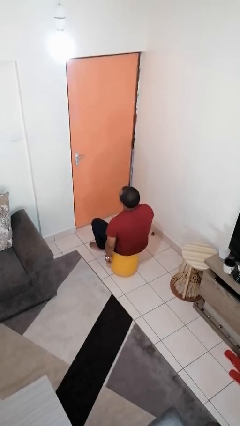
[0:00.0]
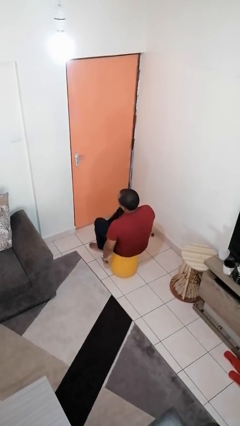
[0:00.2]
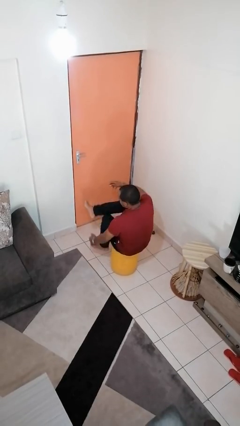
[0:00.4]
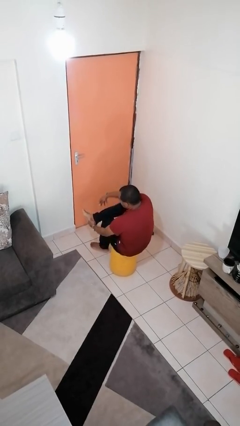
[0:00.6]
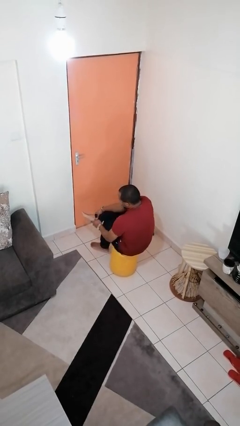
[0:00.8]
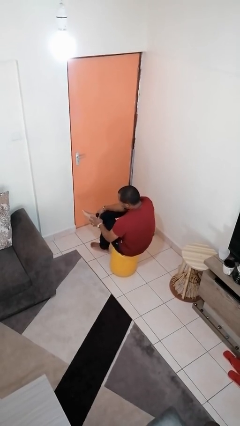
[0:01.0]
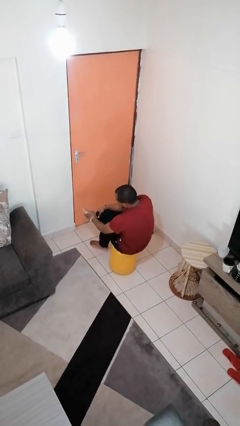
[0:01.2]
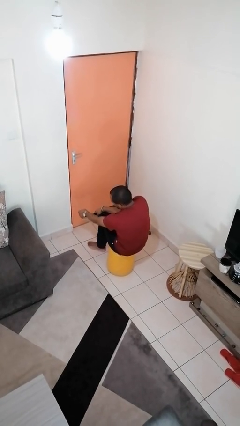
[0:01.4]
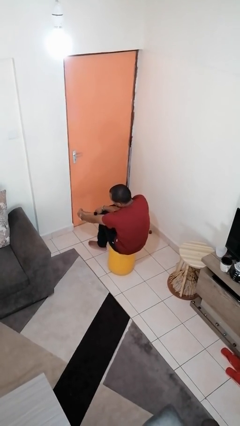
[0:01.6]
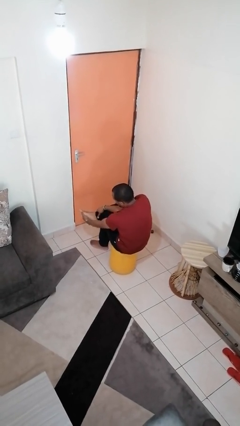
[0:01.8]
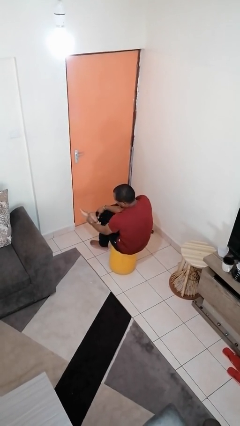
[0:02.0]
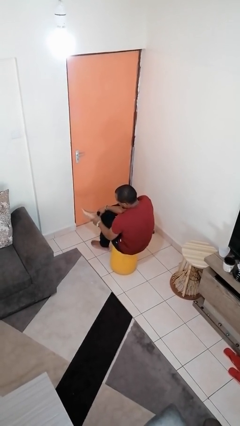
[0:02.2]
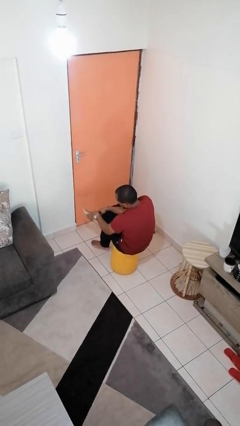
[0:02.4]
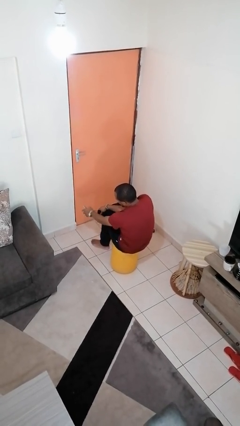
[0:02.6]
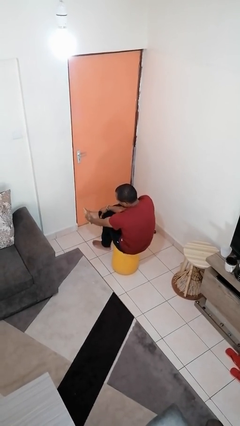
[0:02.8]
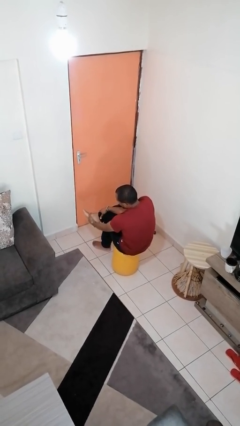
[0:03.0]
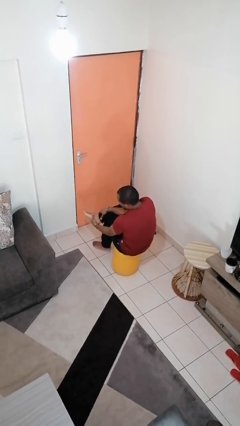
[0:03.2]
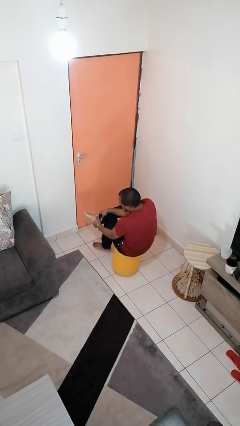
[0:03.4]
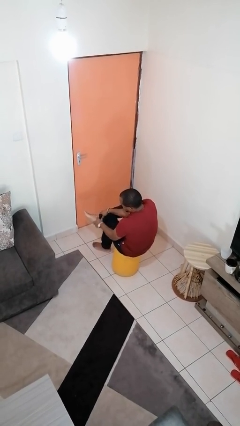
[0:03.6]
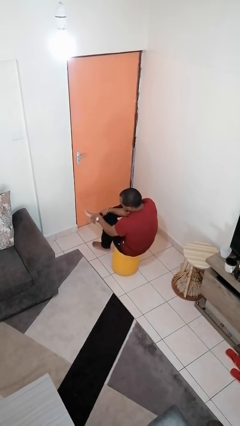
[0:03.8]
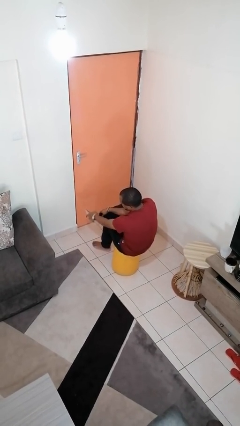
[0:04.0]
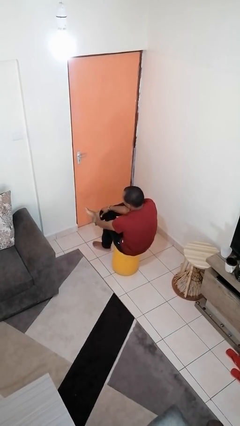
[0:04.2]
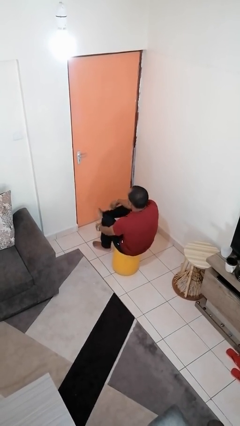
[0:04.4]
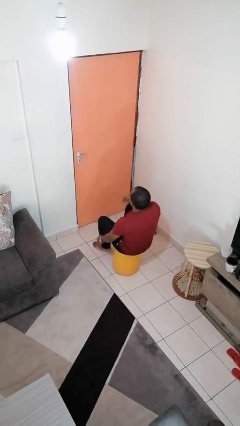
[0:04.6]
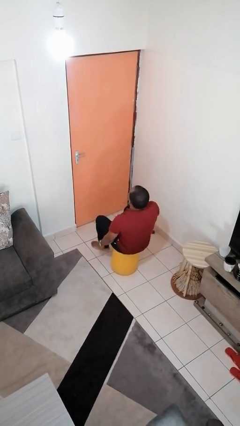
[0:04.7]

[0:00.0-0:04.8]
person rubs foot

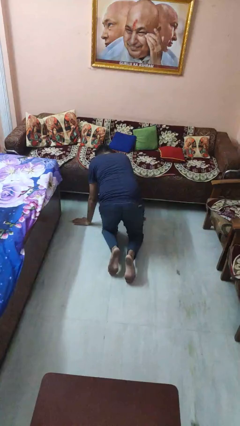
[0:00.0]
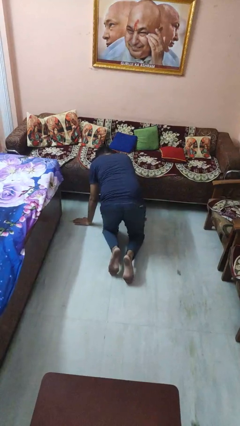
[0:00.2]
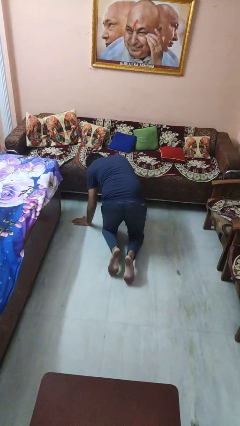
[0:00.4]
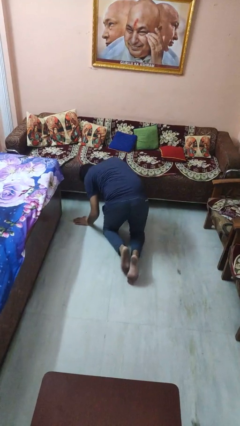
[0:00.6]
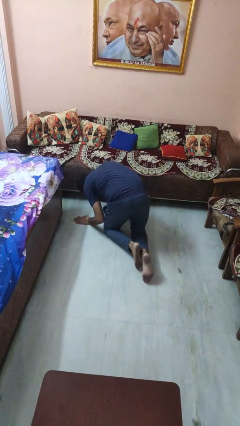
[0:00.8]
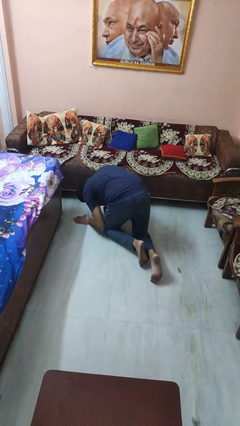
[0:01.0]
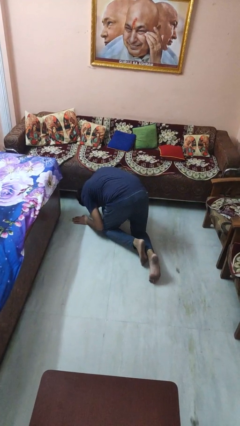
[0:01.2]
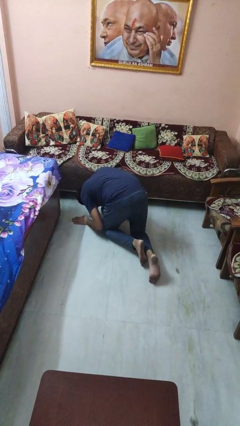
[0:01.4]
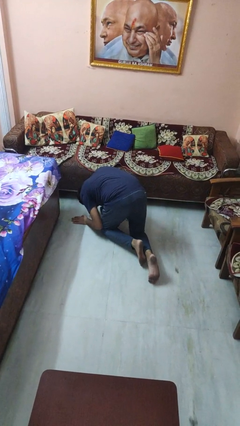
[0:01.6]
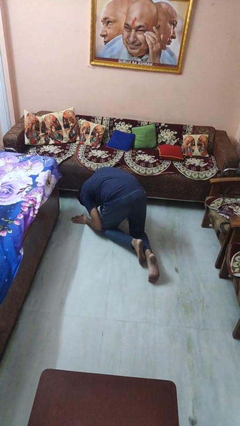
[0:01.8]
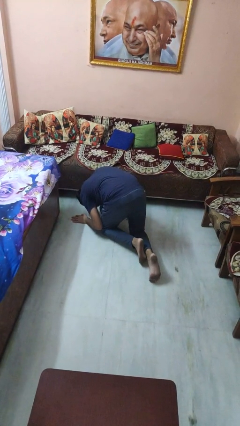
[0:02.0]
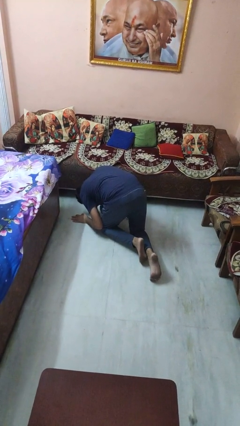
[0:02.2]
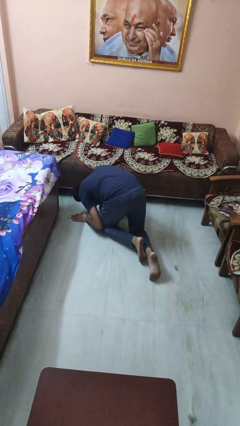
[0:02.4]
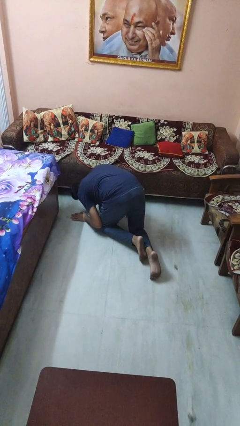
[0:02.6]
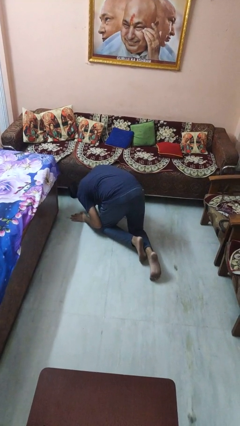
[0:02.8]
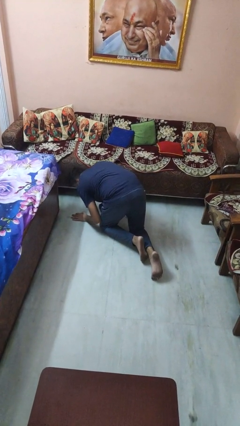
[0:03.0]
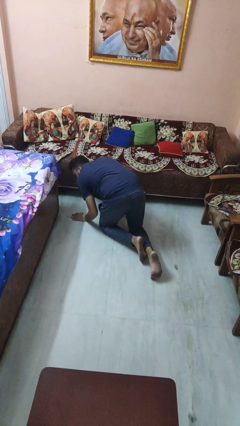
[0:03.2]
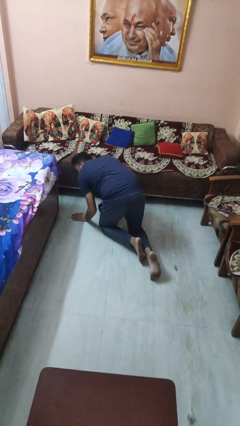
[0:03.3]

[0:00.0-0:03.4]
person searches under couch

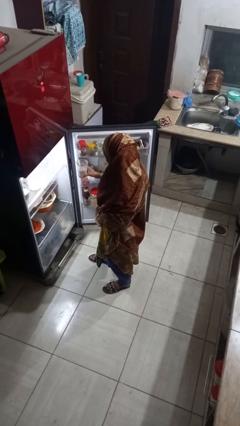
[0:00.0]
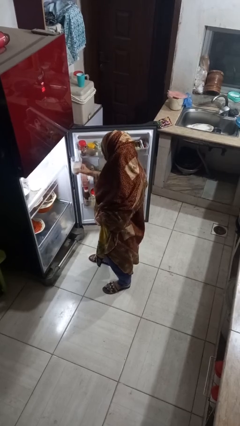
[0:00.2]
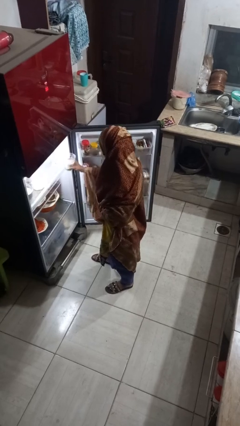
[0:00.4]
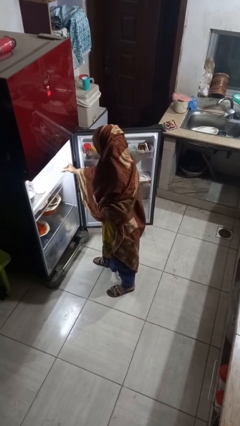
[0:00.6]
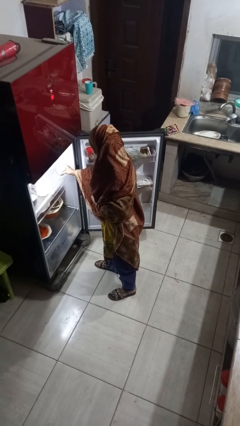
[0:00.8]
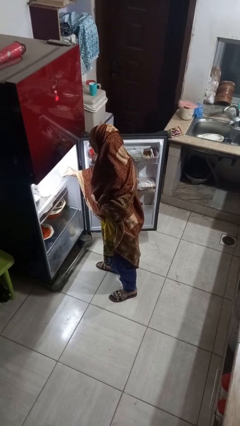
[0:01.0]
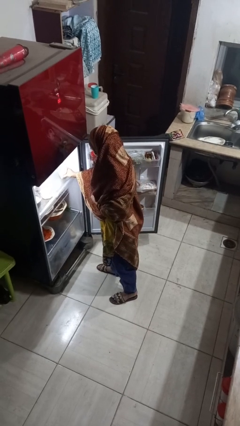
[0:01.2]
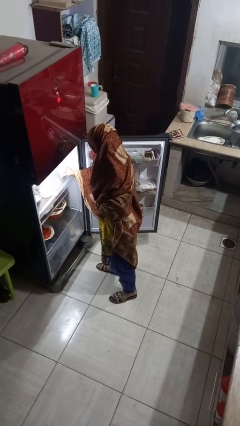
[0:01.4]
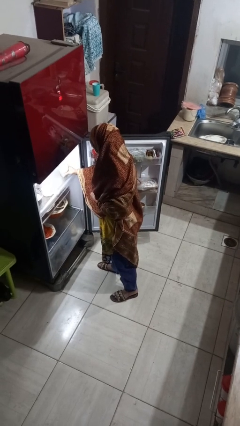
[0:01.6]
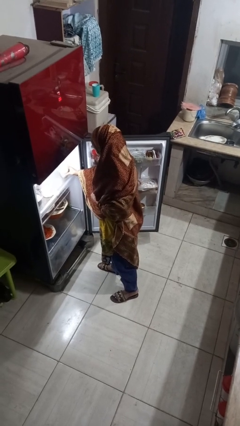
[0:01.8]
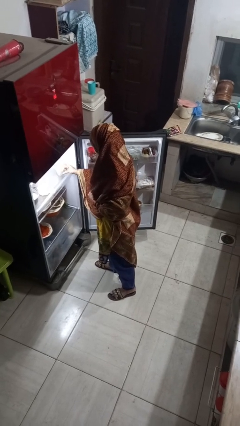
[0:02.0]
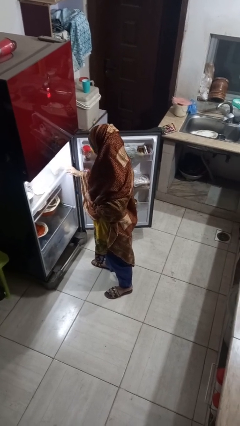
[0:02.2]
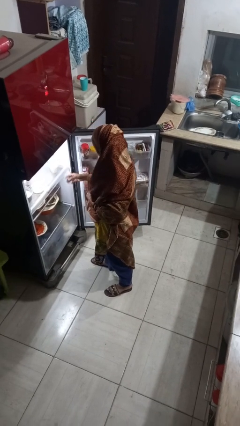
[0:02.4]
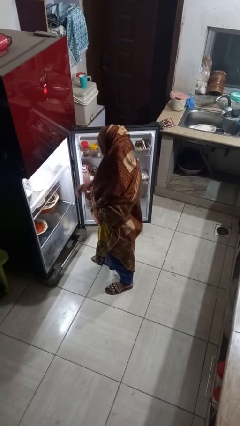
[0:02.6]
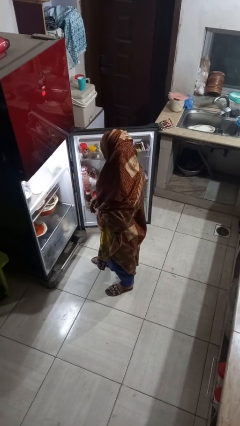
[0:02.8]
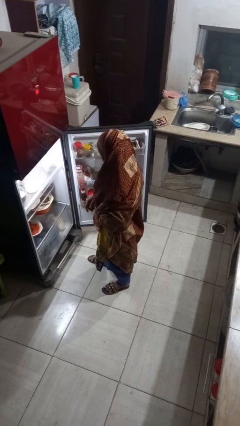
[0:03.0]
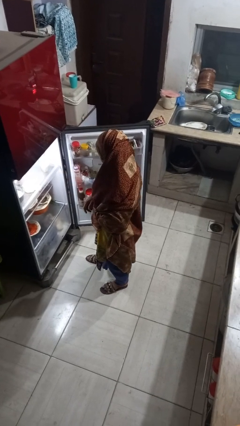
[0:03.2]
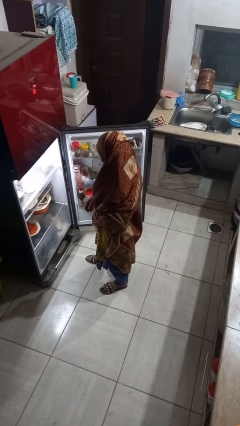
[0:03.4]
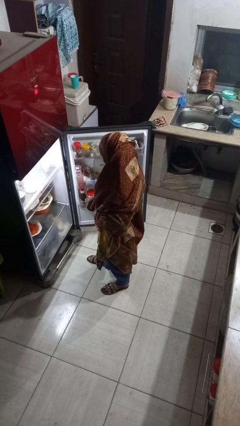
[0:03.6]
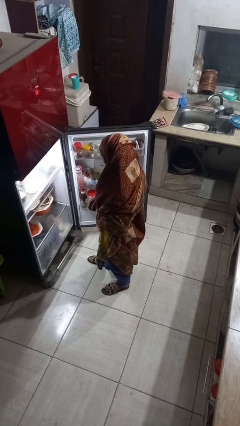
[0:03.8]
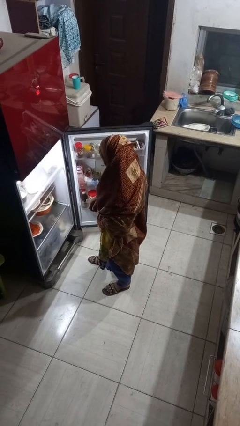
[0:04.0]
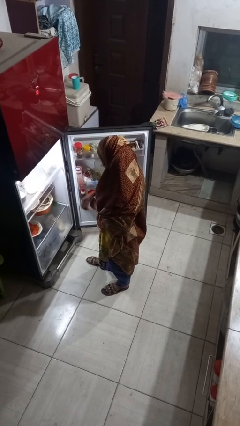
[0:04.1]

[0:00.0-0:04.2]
person puts object into refrigerator

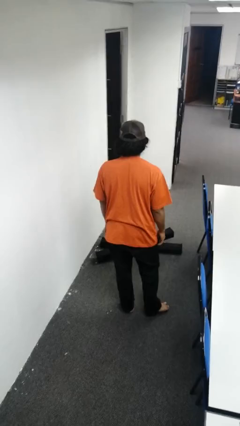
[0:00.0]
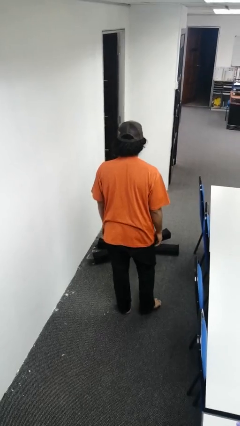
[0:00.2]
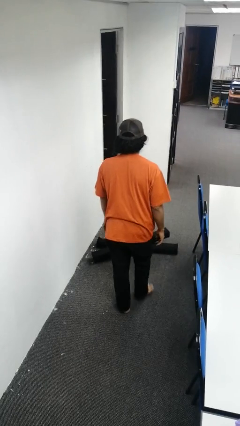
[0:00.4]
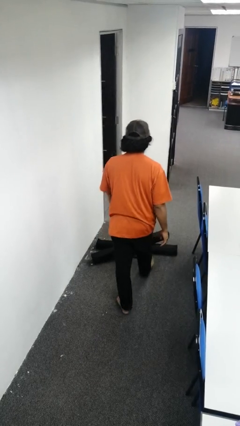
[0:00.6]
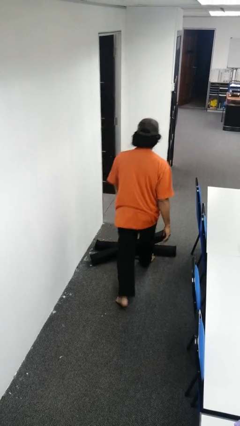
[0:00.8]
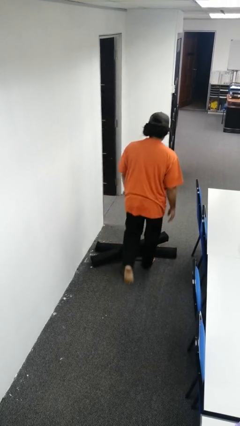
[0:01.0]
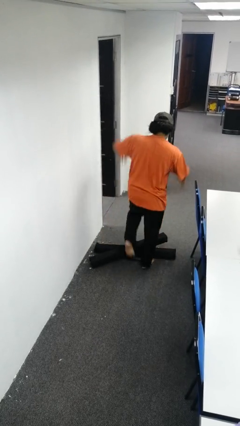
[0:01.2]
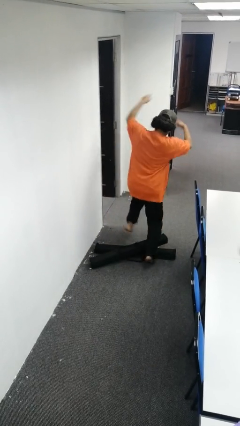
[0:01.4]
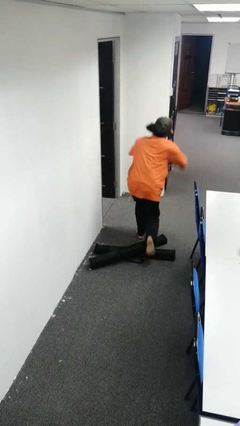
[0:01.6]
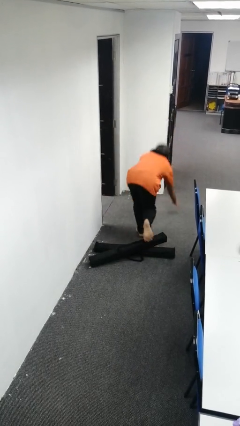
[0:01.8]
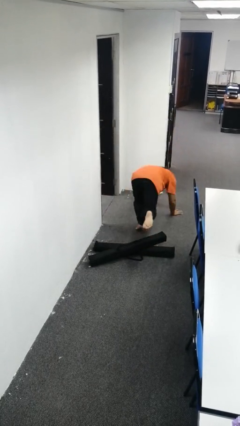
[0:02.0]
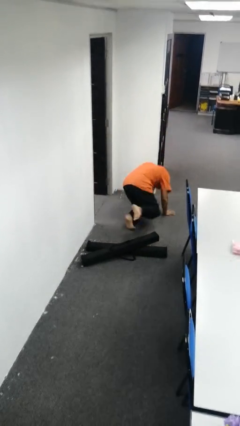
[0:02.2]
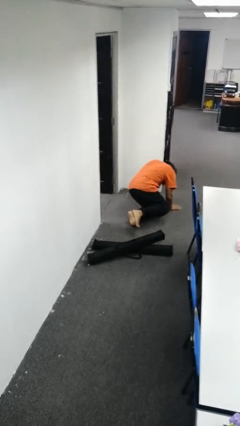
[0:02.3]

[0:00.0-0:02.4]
person trips on object on floor

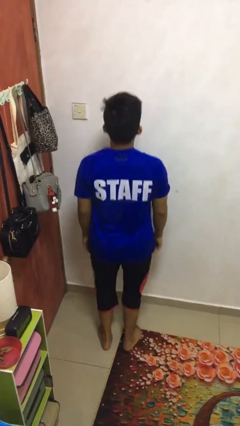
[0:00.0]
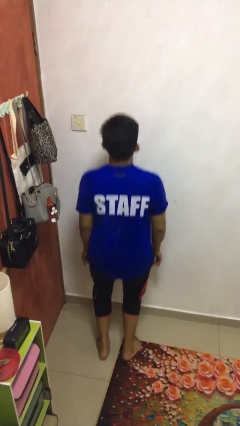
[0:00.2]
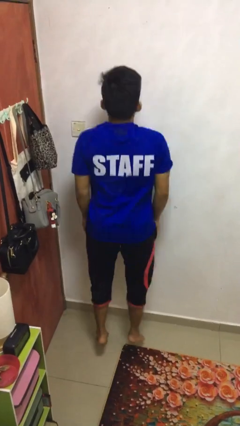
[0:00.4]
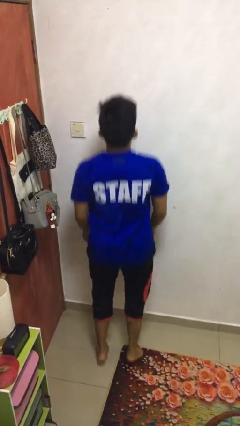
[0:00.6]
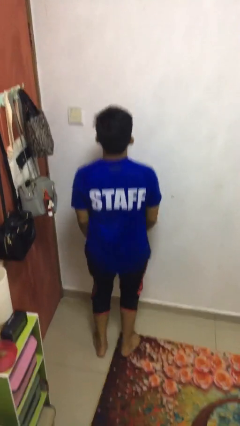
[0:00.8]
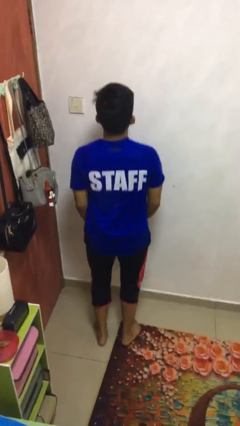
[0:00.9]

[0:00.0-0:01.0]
person jumps

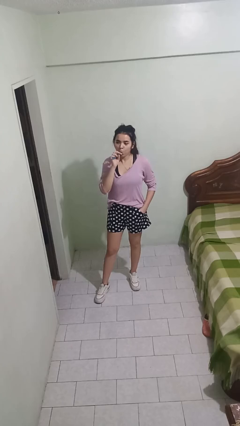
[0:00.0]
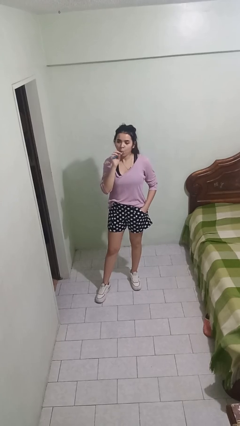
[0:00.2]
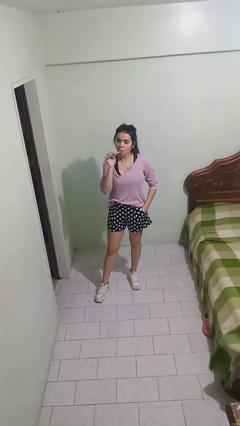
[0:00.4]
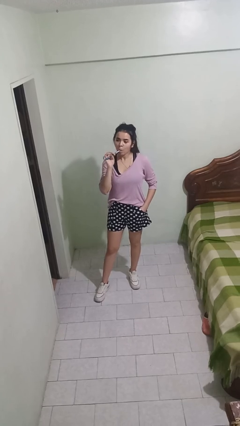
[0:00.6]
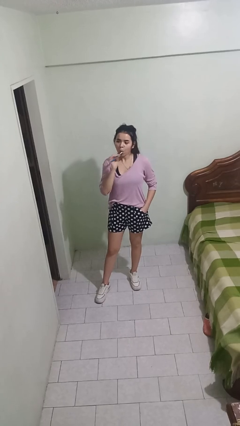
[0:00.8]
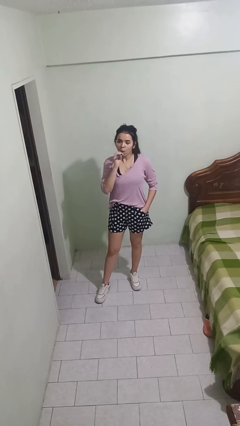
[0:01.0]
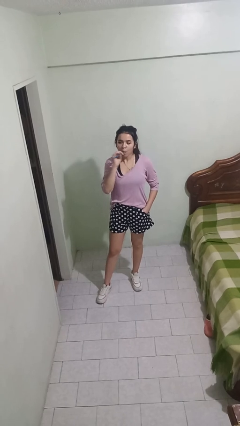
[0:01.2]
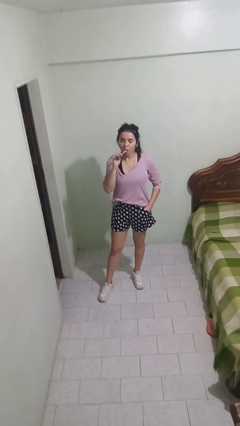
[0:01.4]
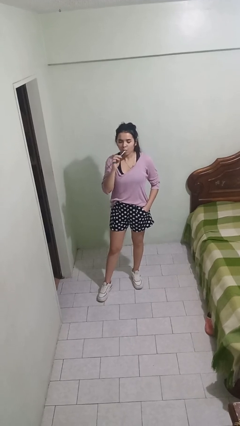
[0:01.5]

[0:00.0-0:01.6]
person brushes teeth
